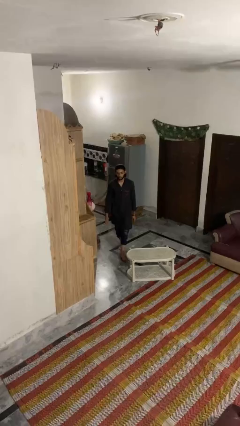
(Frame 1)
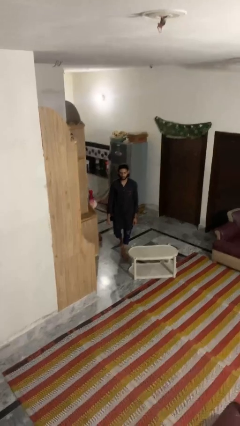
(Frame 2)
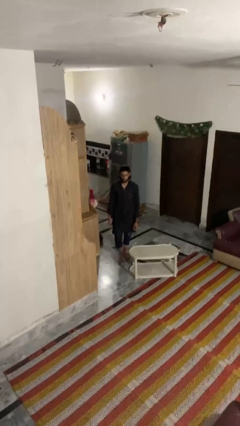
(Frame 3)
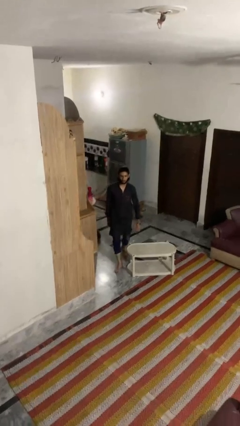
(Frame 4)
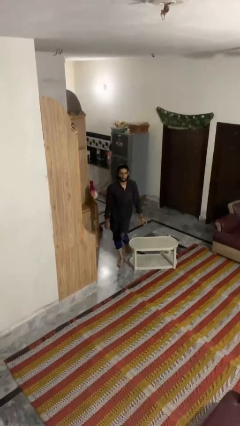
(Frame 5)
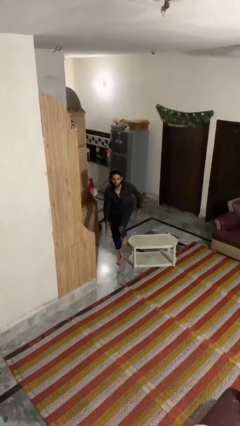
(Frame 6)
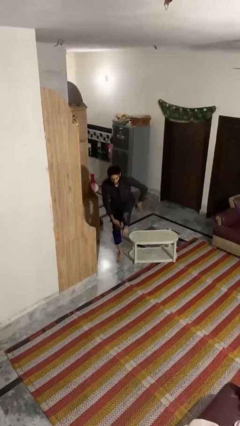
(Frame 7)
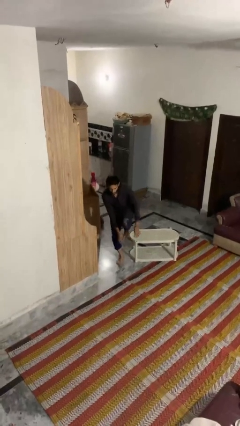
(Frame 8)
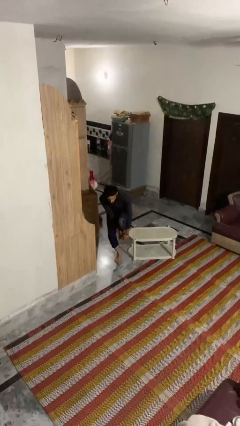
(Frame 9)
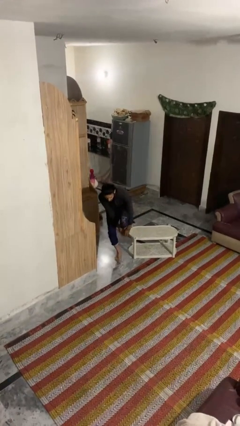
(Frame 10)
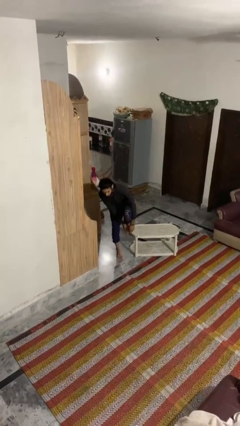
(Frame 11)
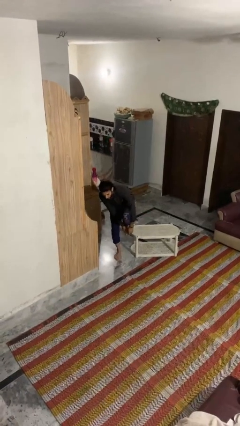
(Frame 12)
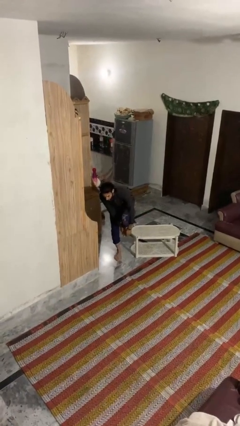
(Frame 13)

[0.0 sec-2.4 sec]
person bumps into table

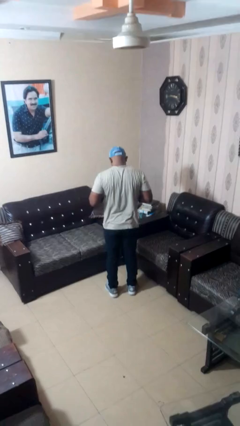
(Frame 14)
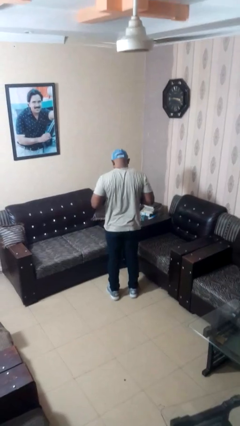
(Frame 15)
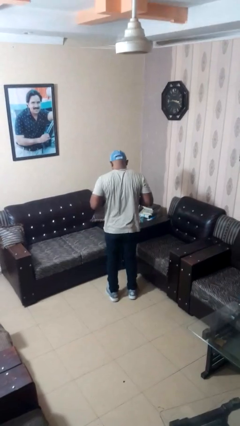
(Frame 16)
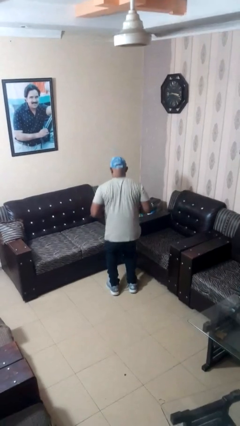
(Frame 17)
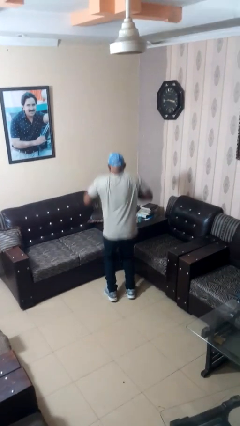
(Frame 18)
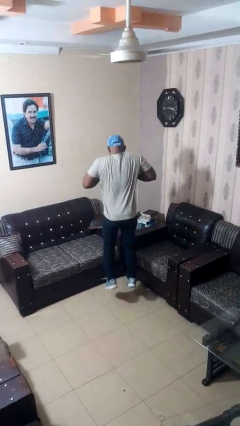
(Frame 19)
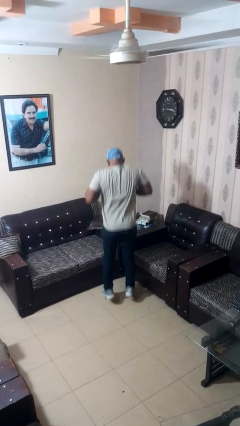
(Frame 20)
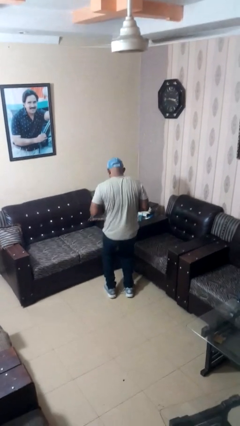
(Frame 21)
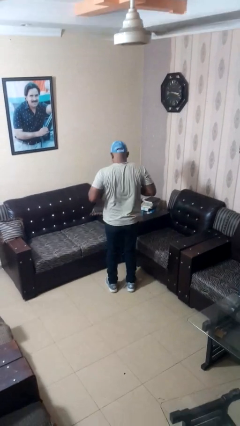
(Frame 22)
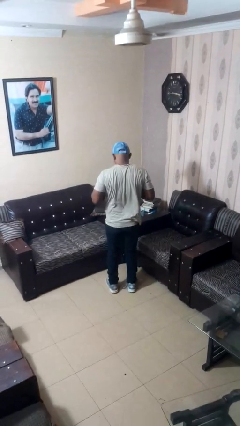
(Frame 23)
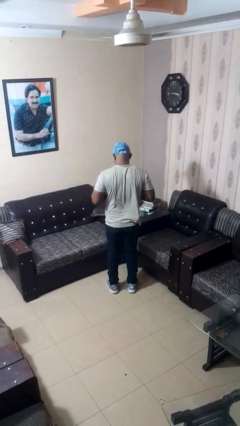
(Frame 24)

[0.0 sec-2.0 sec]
person jumps

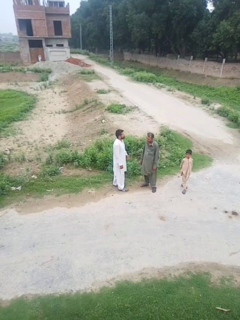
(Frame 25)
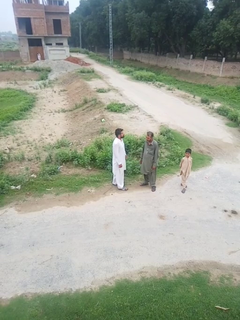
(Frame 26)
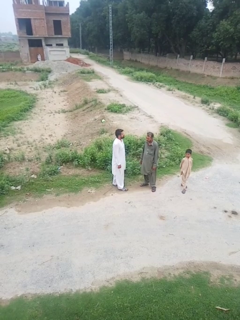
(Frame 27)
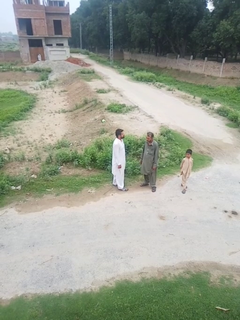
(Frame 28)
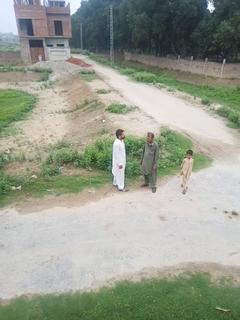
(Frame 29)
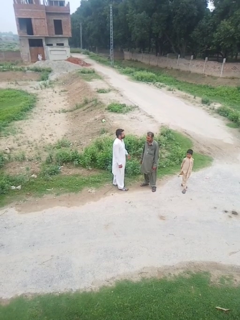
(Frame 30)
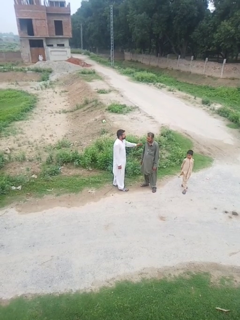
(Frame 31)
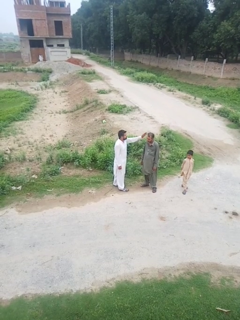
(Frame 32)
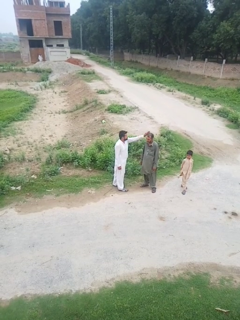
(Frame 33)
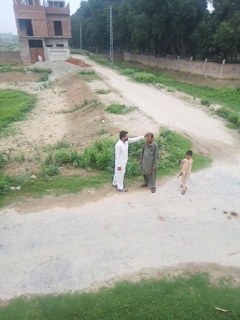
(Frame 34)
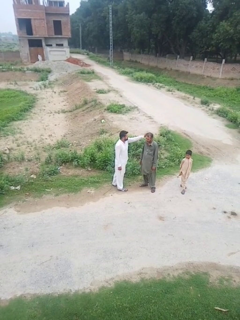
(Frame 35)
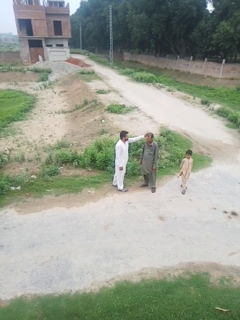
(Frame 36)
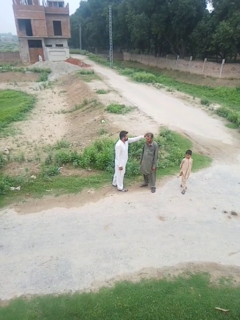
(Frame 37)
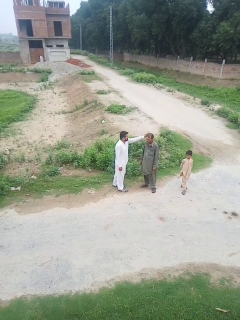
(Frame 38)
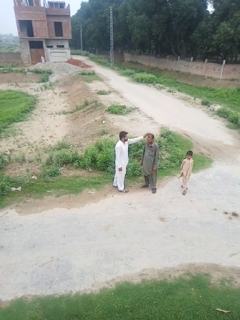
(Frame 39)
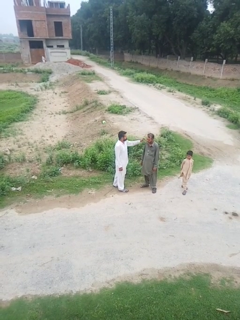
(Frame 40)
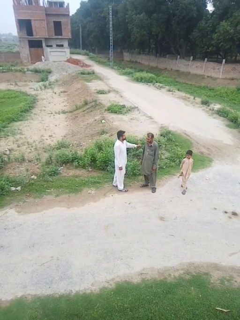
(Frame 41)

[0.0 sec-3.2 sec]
person touches face of person

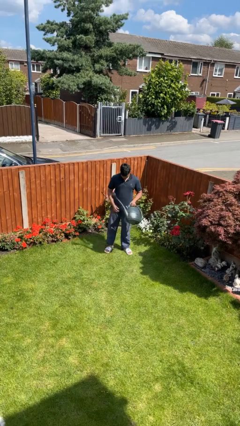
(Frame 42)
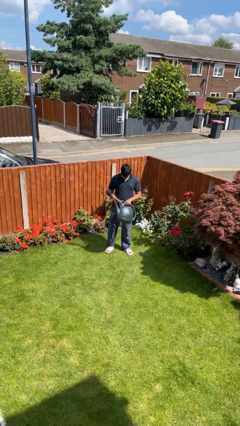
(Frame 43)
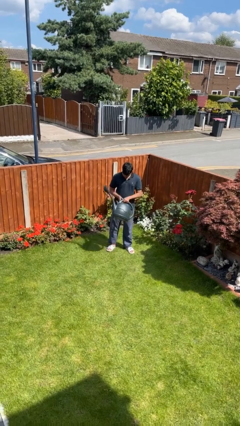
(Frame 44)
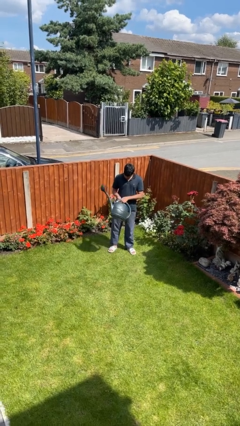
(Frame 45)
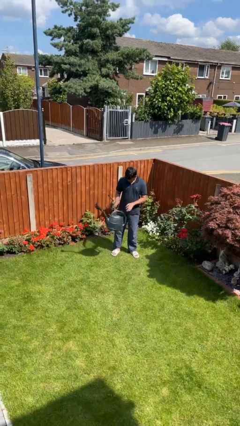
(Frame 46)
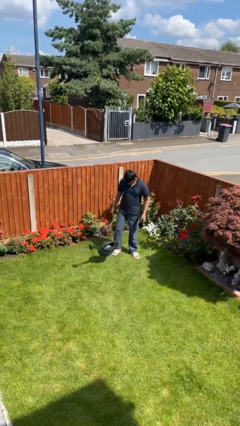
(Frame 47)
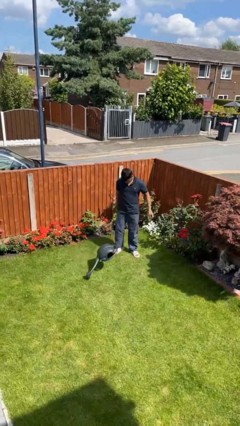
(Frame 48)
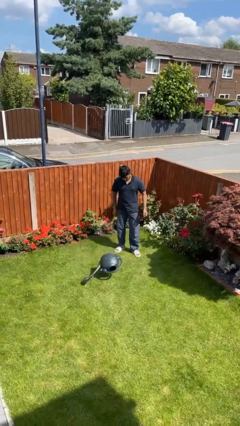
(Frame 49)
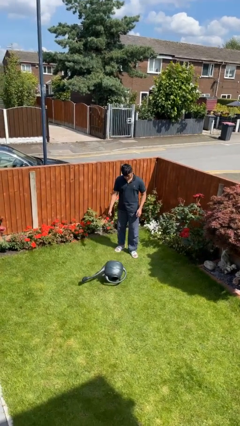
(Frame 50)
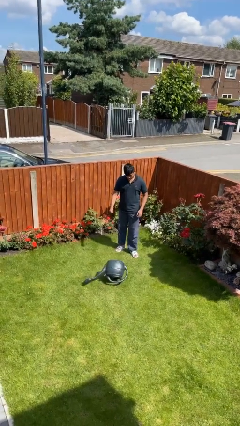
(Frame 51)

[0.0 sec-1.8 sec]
person drops object

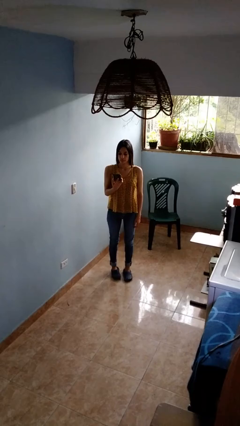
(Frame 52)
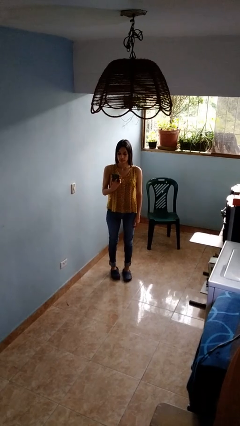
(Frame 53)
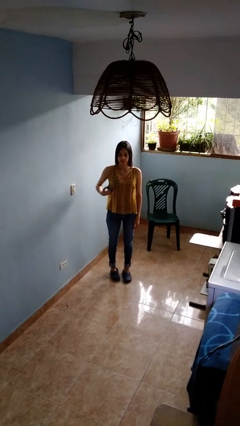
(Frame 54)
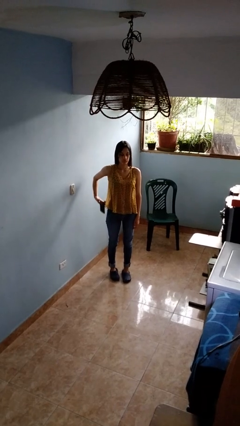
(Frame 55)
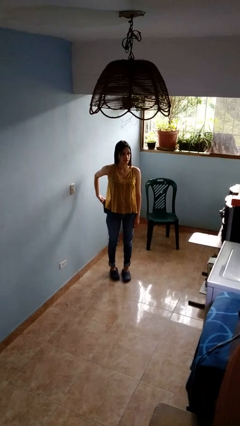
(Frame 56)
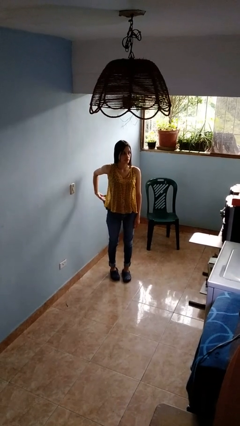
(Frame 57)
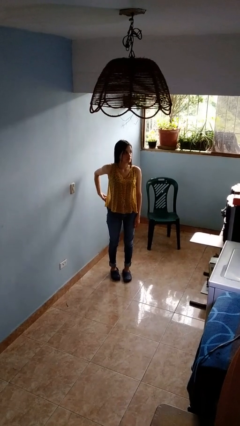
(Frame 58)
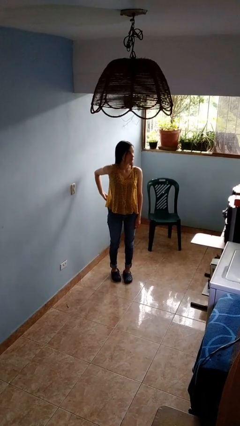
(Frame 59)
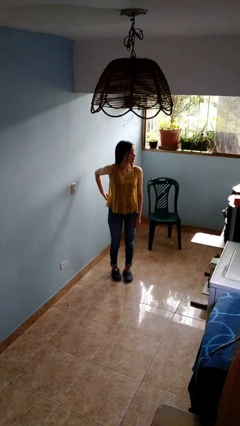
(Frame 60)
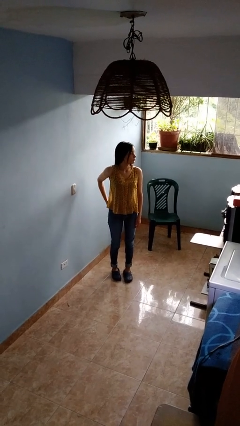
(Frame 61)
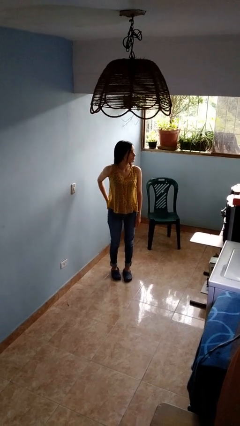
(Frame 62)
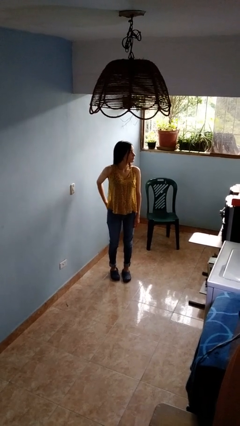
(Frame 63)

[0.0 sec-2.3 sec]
person puts phone into pocket

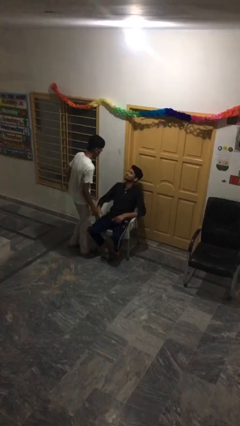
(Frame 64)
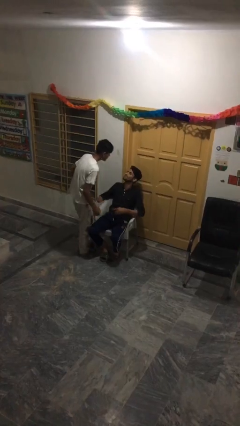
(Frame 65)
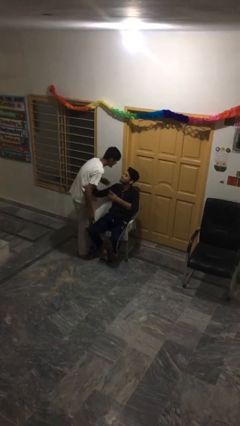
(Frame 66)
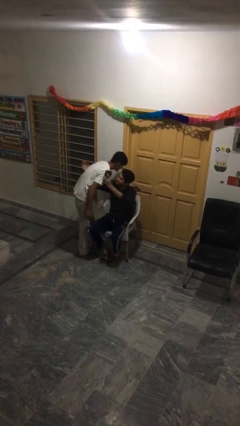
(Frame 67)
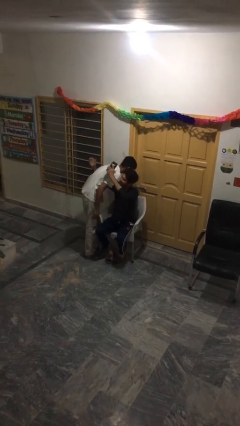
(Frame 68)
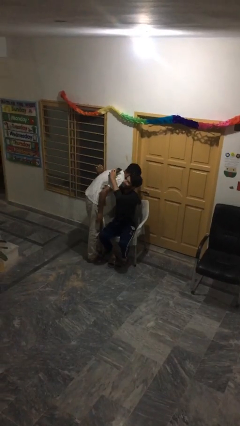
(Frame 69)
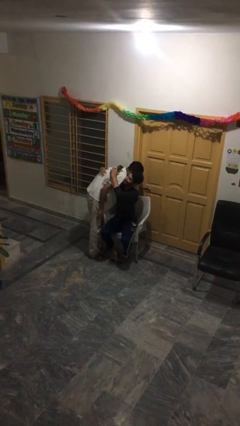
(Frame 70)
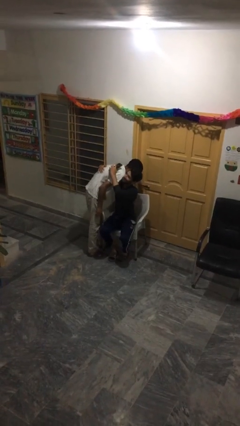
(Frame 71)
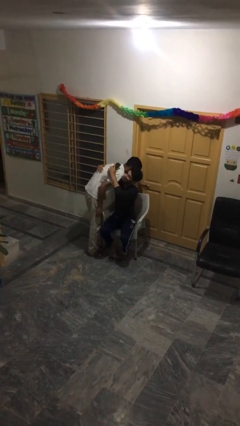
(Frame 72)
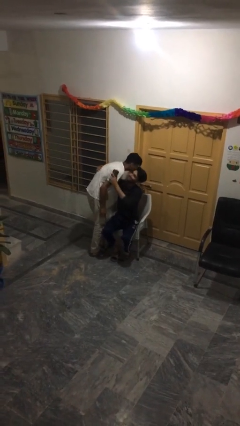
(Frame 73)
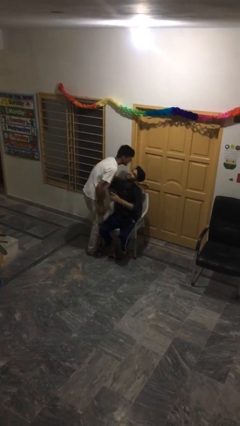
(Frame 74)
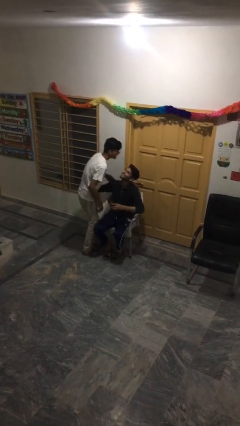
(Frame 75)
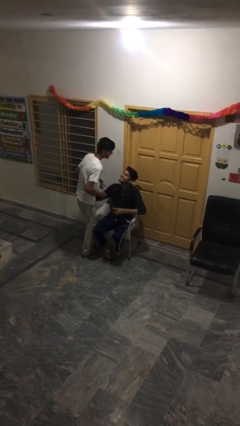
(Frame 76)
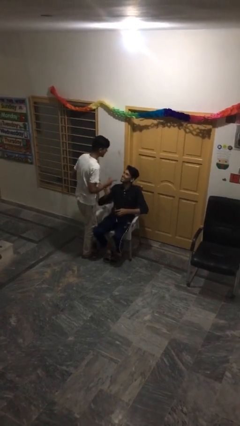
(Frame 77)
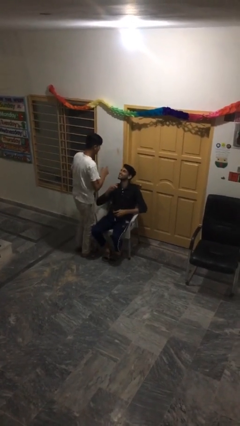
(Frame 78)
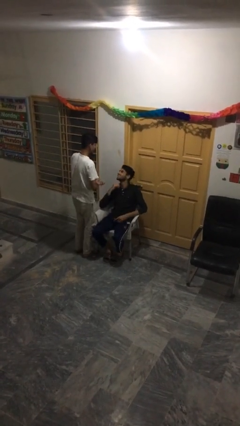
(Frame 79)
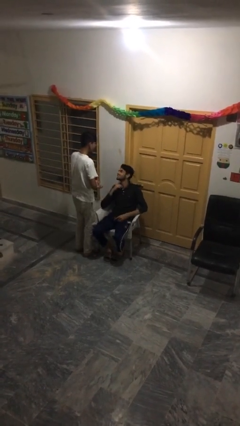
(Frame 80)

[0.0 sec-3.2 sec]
person embraces person

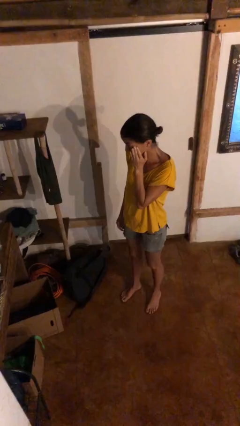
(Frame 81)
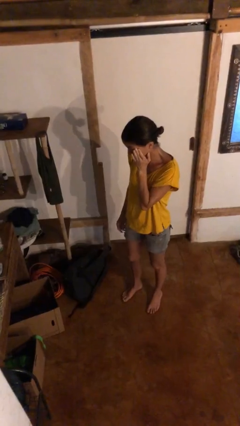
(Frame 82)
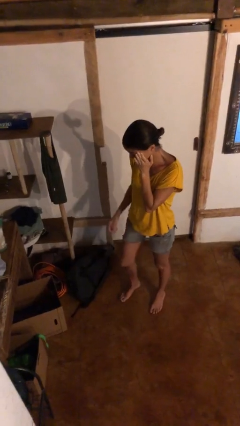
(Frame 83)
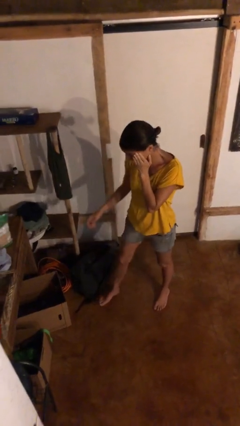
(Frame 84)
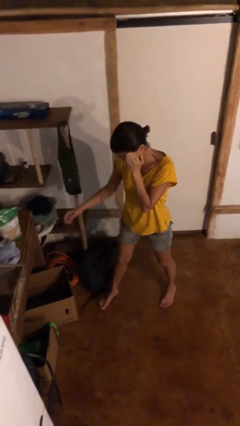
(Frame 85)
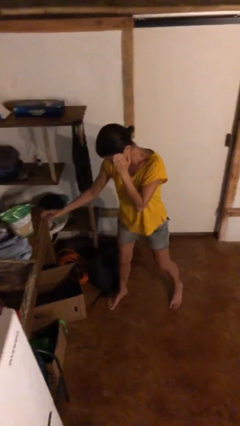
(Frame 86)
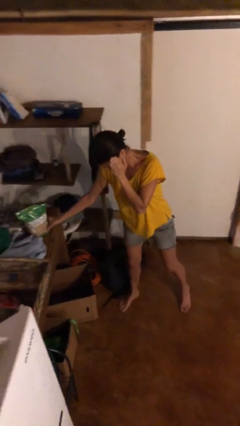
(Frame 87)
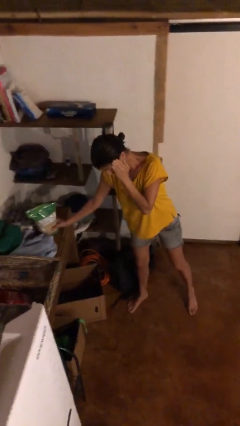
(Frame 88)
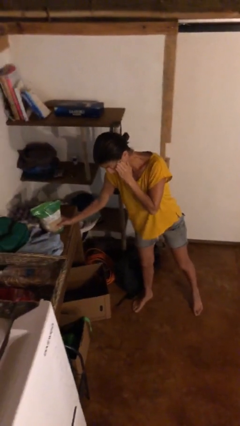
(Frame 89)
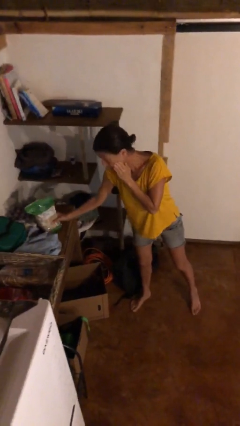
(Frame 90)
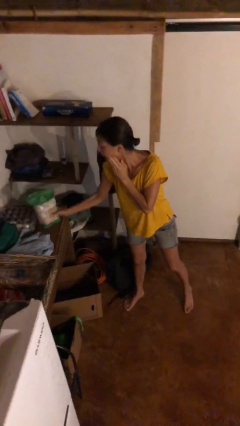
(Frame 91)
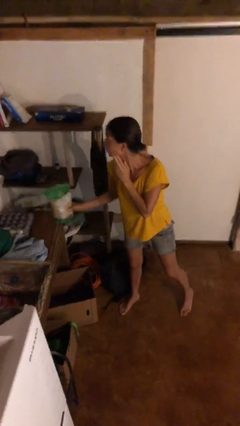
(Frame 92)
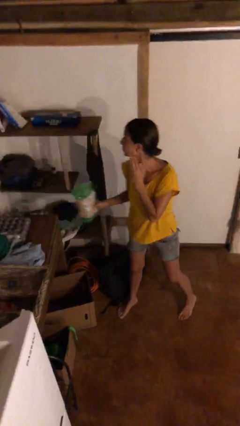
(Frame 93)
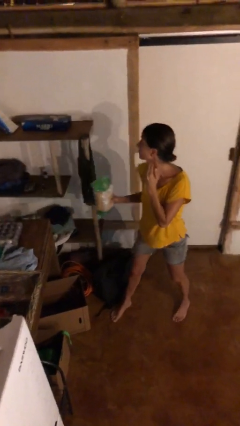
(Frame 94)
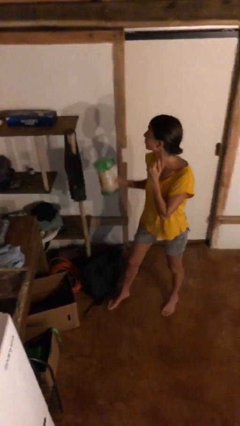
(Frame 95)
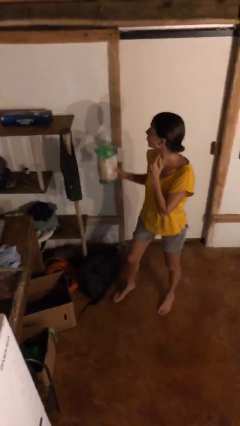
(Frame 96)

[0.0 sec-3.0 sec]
person picks up object from table
